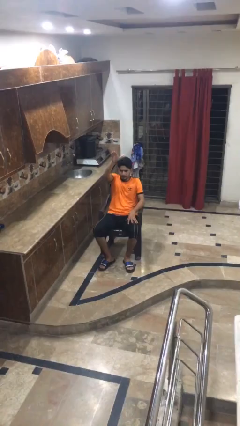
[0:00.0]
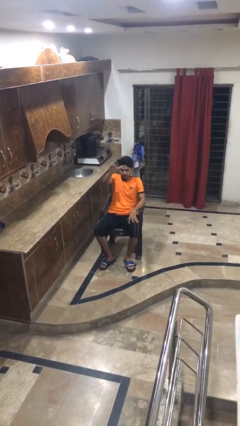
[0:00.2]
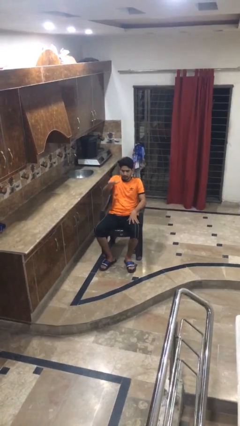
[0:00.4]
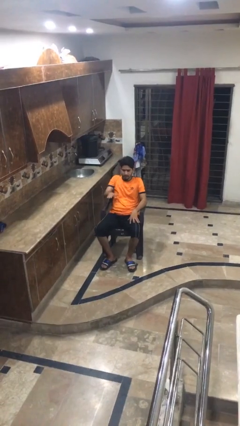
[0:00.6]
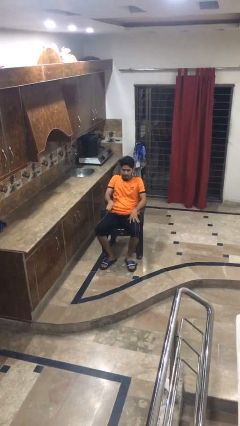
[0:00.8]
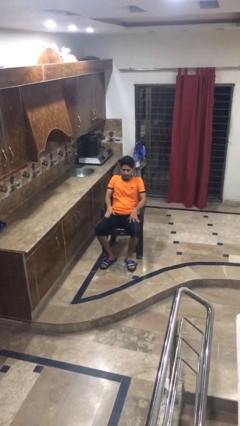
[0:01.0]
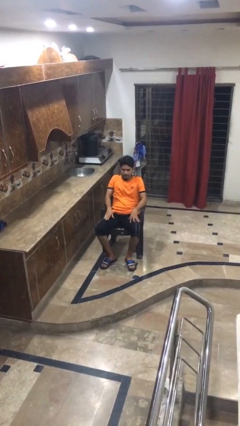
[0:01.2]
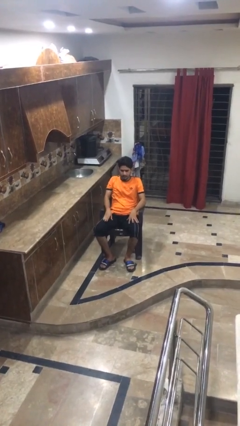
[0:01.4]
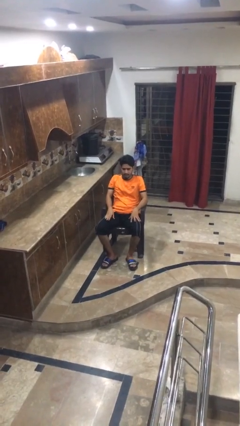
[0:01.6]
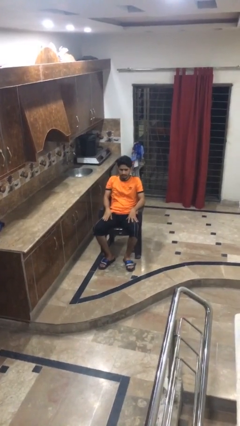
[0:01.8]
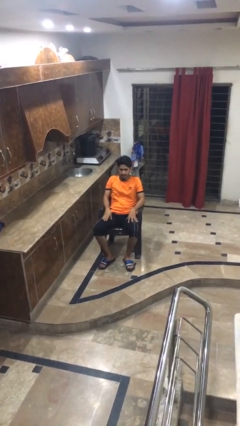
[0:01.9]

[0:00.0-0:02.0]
person gestures swipe down

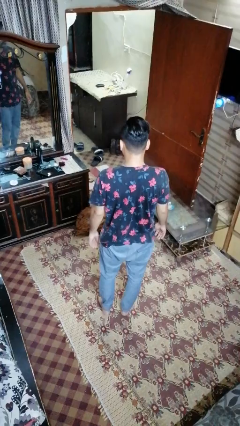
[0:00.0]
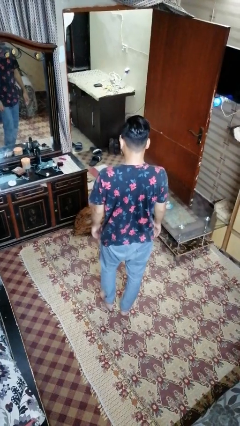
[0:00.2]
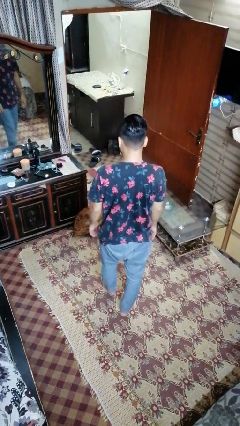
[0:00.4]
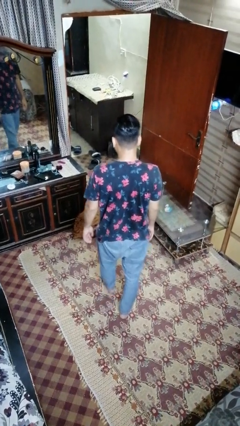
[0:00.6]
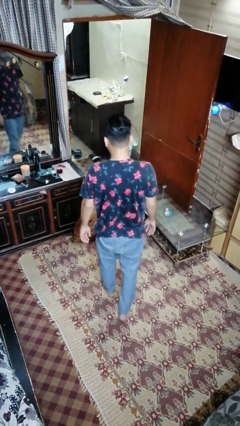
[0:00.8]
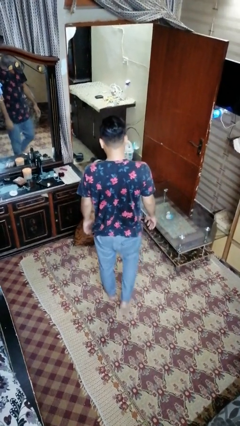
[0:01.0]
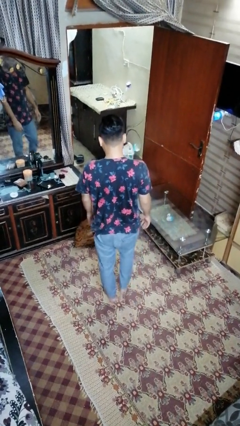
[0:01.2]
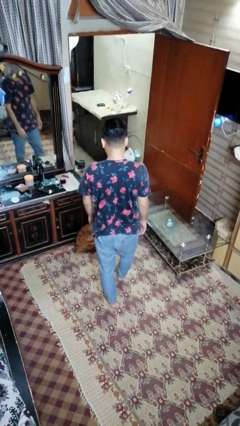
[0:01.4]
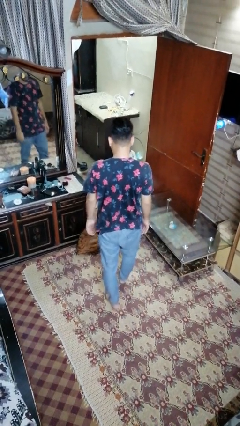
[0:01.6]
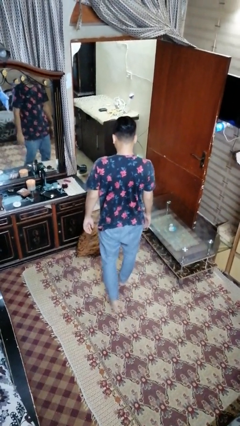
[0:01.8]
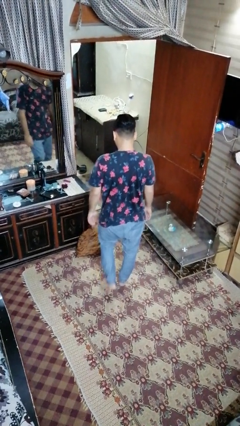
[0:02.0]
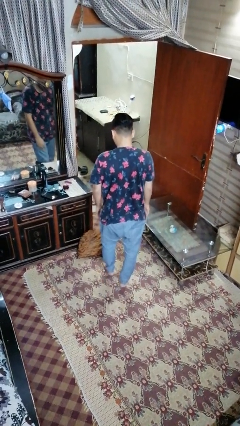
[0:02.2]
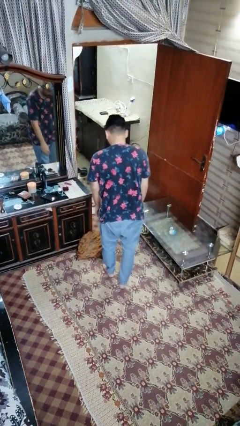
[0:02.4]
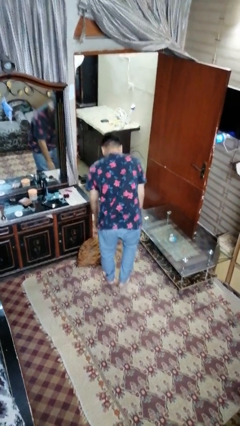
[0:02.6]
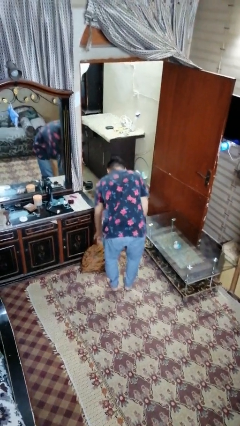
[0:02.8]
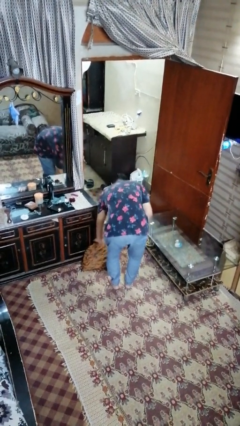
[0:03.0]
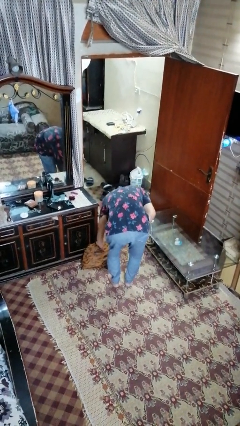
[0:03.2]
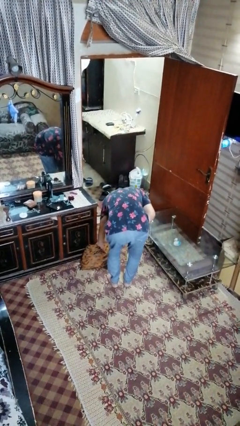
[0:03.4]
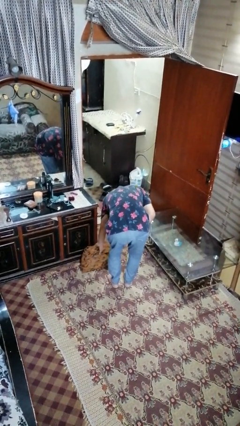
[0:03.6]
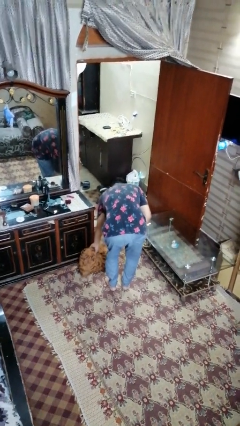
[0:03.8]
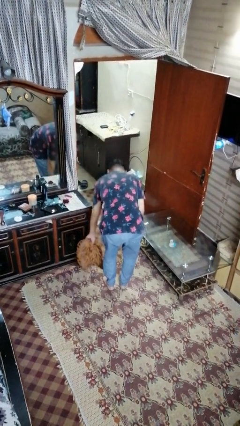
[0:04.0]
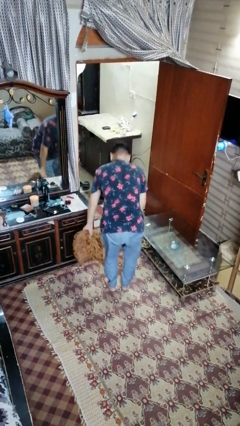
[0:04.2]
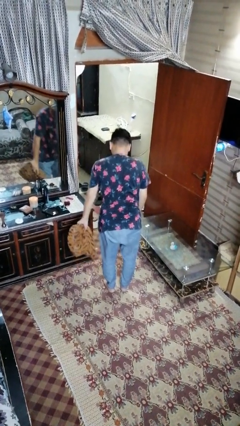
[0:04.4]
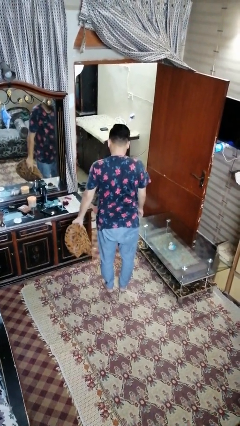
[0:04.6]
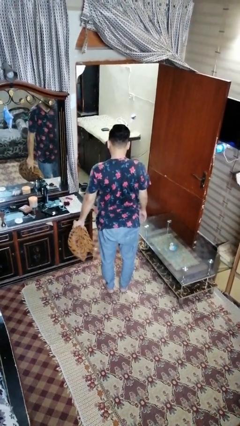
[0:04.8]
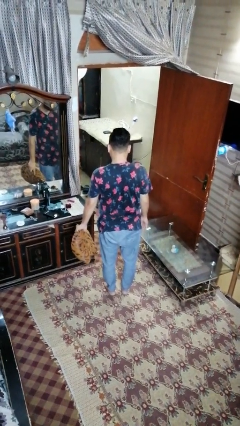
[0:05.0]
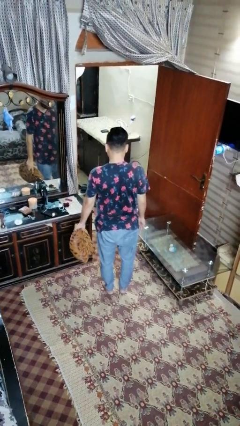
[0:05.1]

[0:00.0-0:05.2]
person picks up object from floor

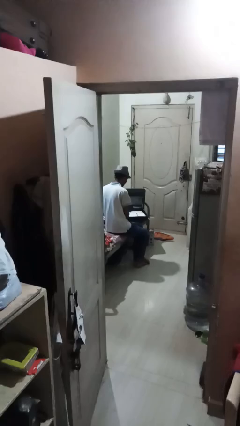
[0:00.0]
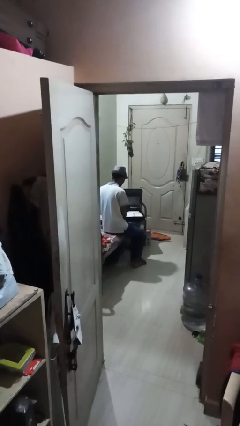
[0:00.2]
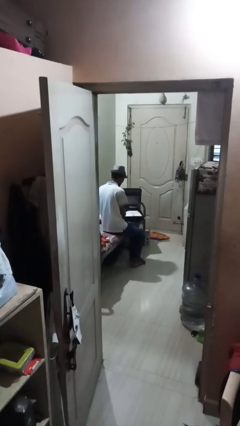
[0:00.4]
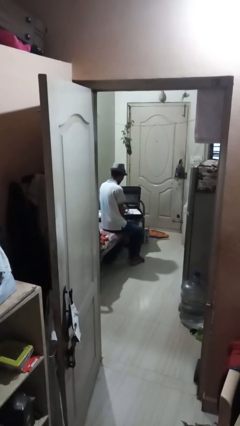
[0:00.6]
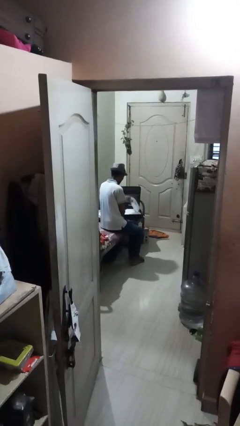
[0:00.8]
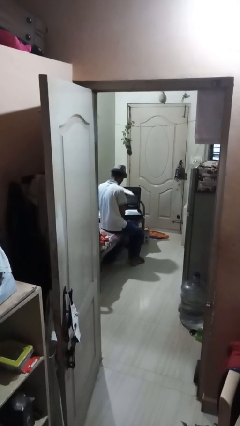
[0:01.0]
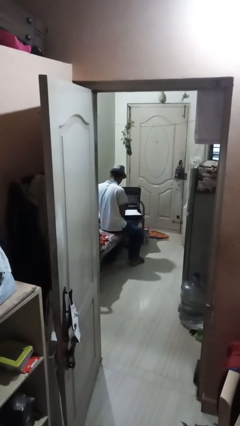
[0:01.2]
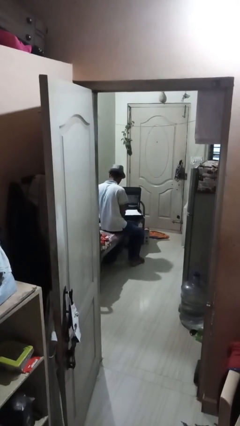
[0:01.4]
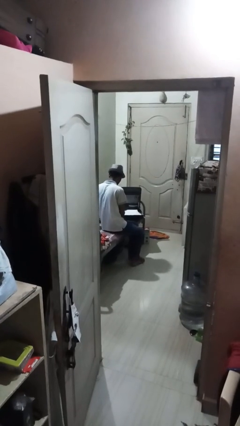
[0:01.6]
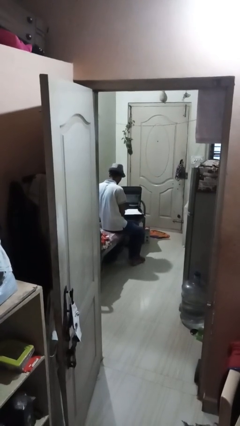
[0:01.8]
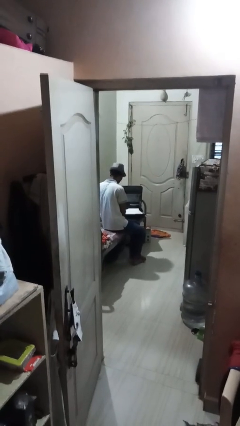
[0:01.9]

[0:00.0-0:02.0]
person unloads clothes from suitcase

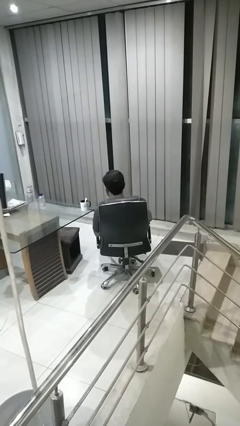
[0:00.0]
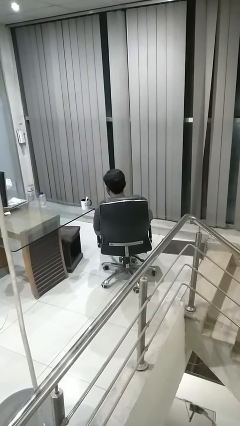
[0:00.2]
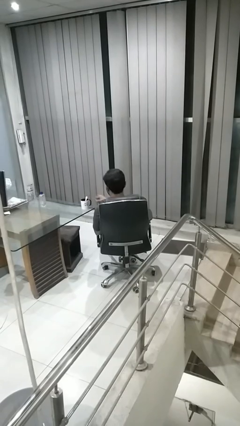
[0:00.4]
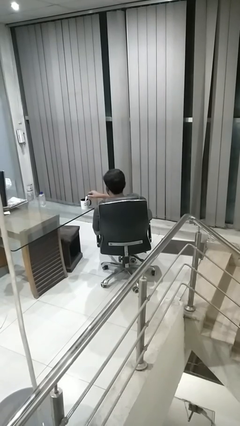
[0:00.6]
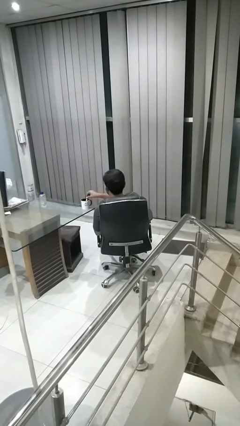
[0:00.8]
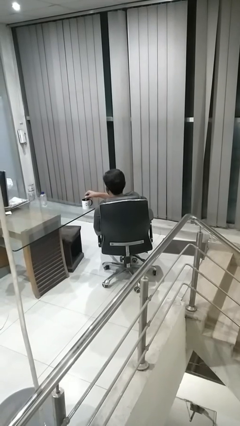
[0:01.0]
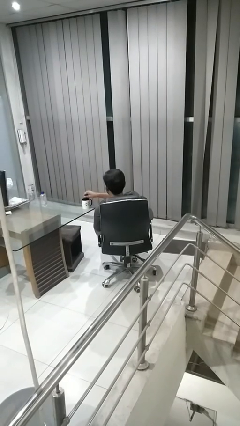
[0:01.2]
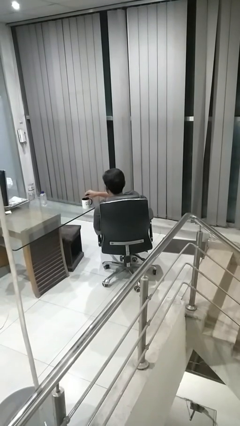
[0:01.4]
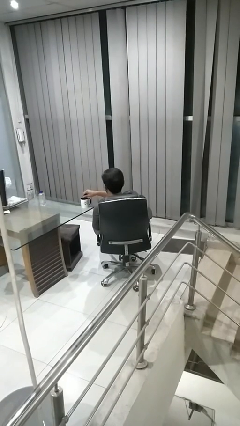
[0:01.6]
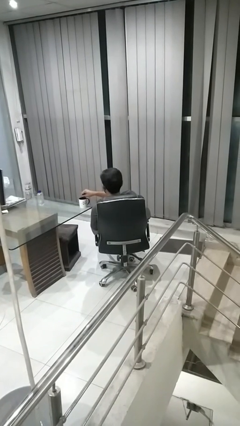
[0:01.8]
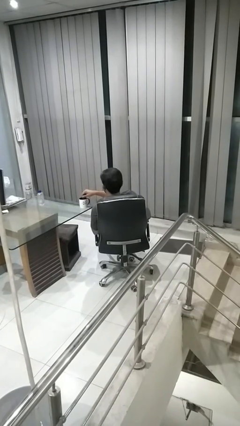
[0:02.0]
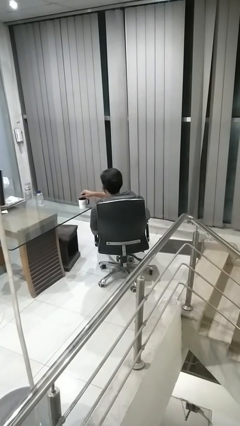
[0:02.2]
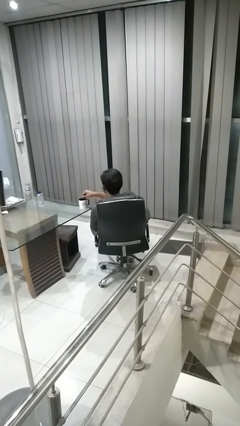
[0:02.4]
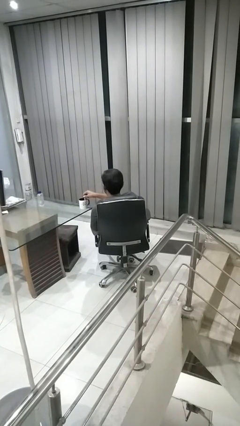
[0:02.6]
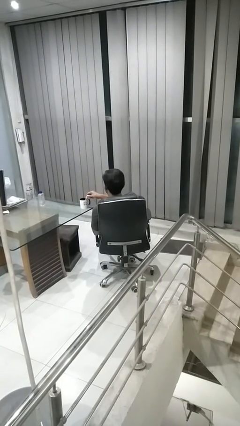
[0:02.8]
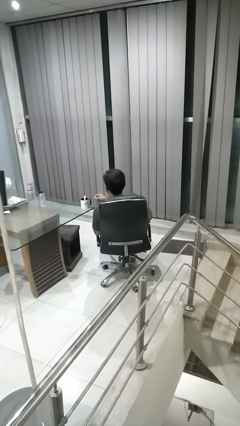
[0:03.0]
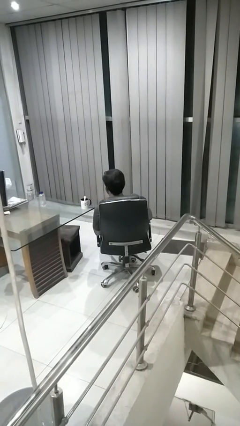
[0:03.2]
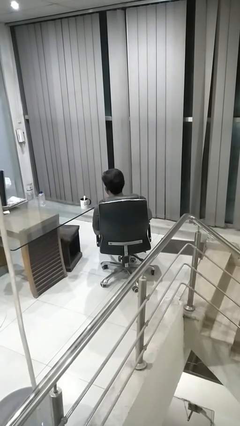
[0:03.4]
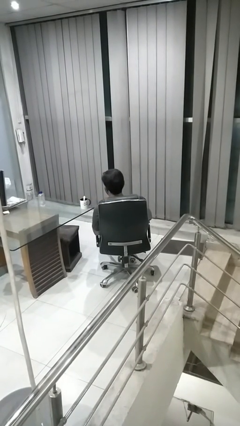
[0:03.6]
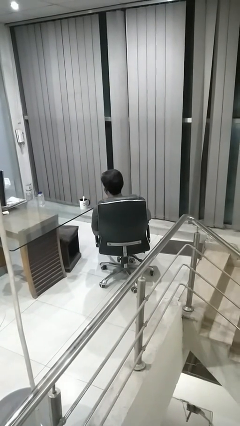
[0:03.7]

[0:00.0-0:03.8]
person stirs mug

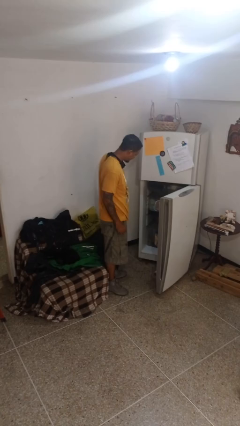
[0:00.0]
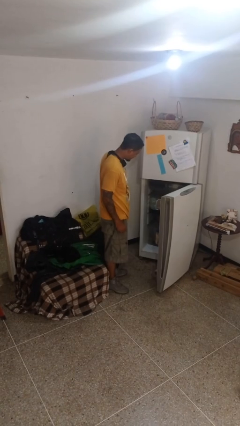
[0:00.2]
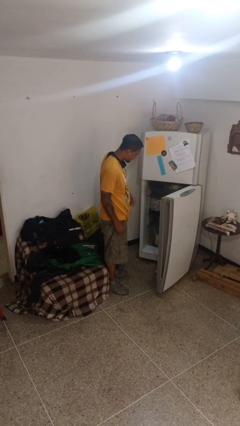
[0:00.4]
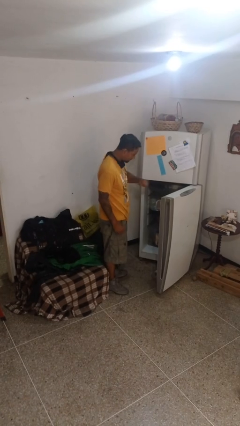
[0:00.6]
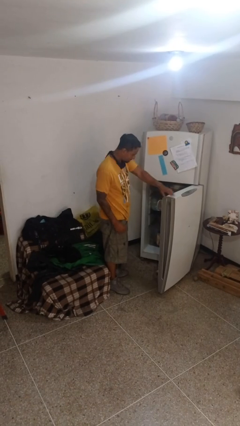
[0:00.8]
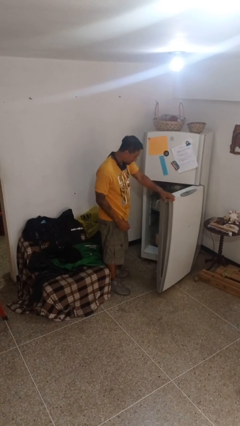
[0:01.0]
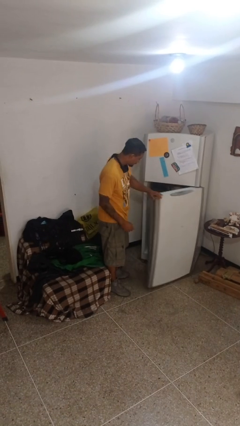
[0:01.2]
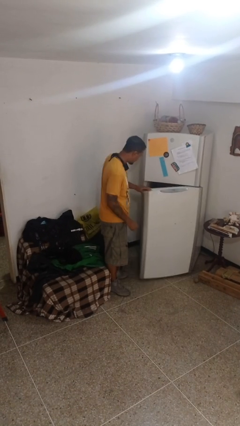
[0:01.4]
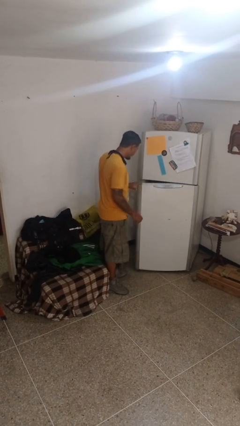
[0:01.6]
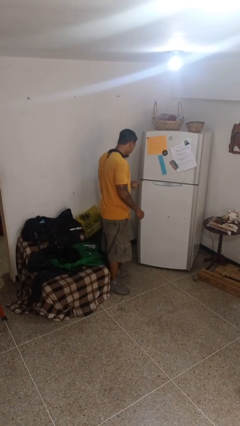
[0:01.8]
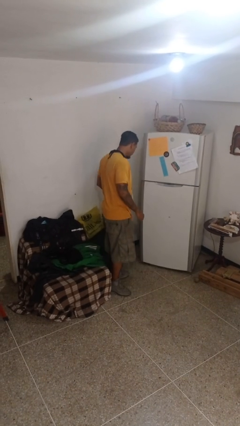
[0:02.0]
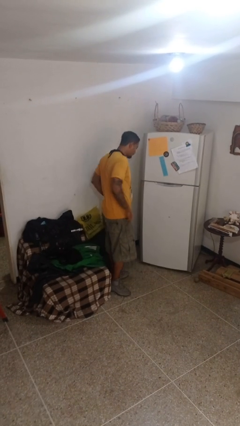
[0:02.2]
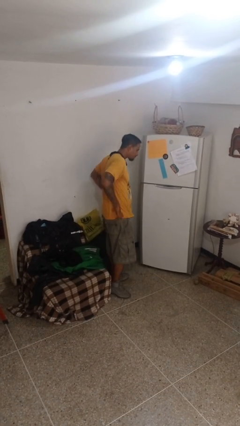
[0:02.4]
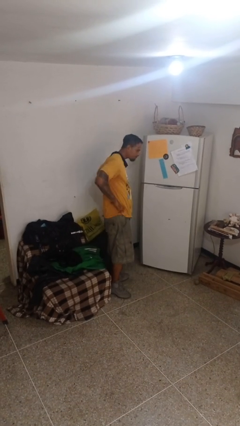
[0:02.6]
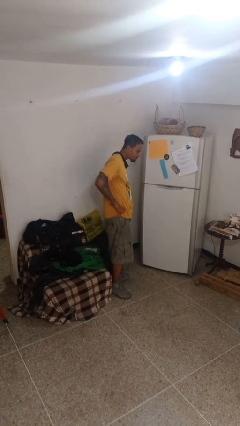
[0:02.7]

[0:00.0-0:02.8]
person closes refrigerator

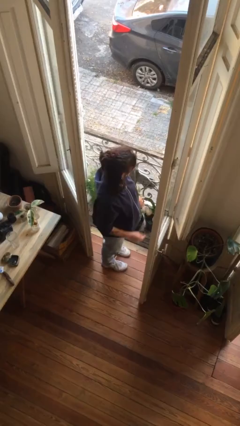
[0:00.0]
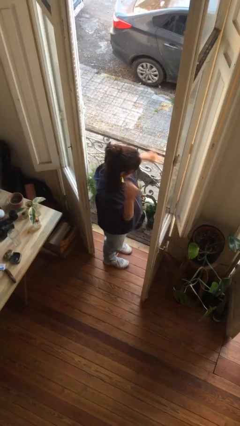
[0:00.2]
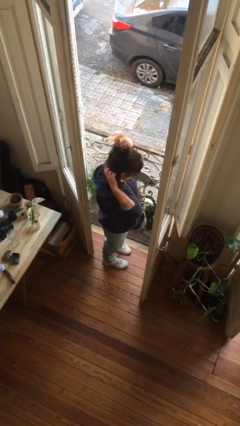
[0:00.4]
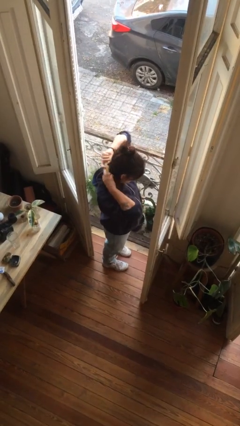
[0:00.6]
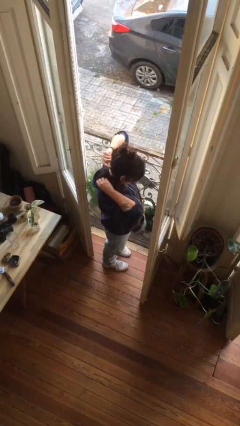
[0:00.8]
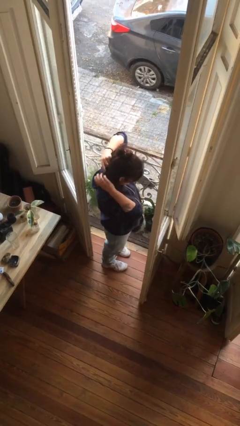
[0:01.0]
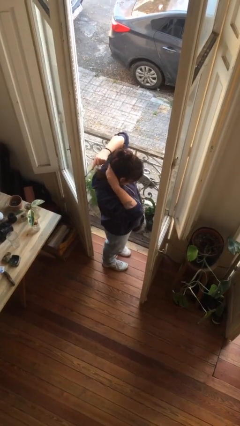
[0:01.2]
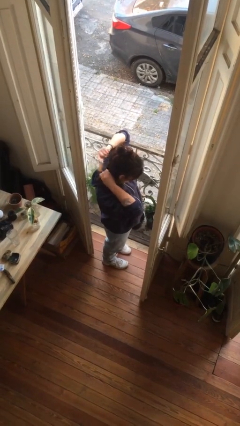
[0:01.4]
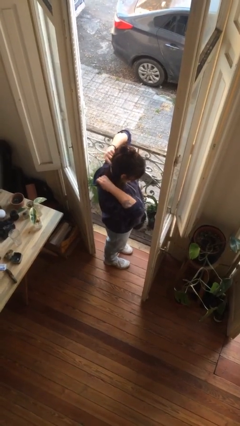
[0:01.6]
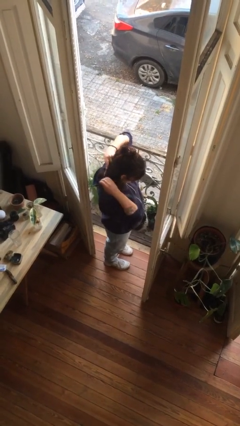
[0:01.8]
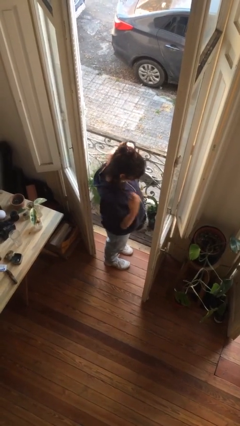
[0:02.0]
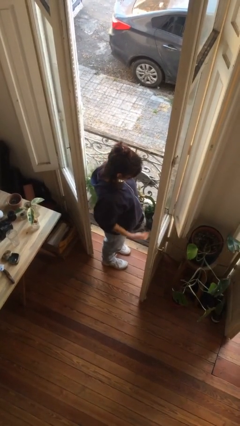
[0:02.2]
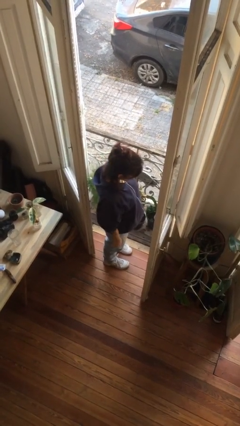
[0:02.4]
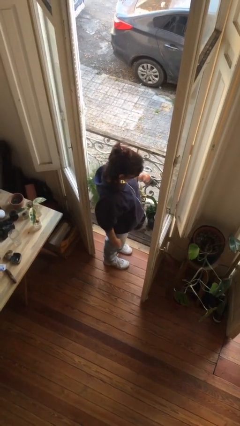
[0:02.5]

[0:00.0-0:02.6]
person brushes hair
